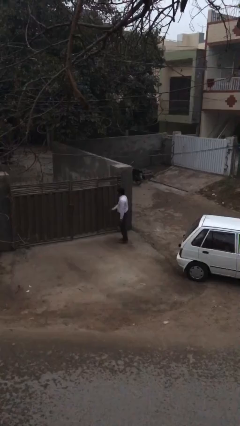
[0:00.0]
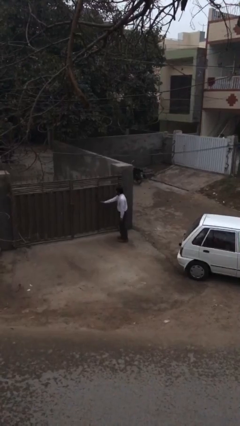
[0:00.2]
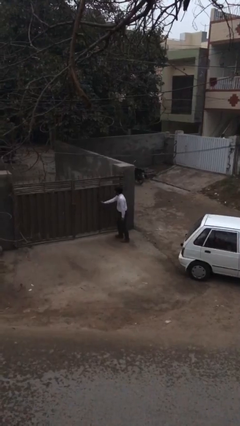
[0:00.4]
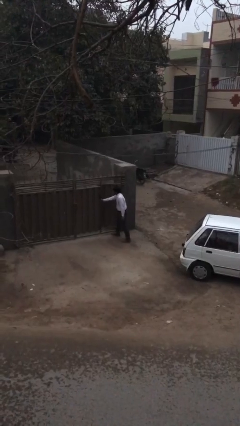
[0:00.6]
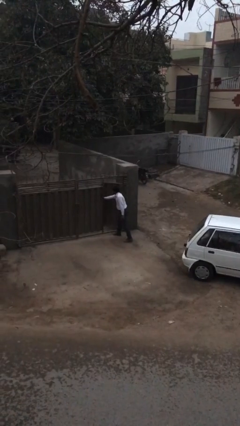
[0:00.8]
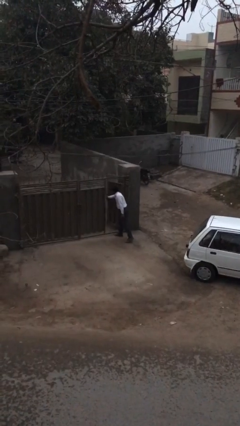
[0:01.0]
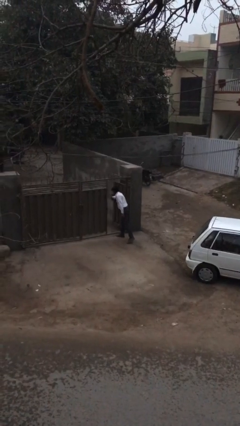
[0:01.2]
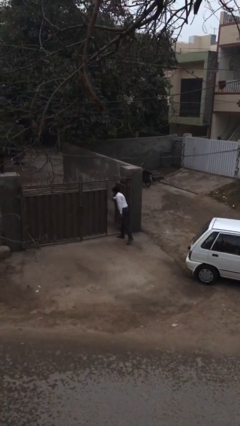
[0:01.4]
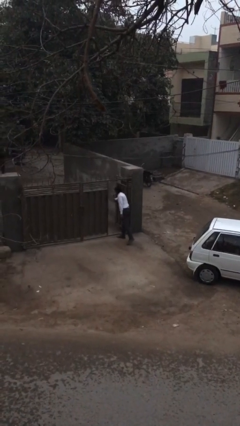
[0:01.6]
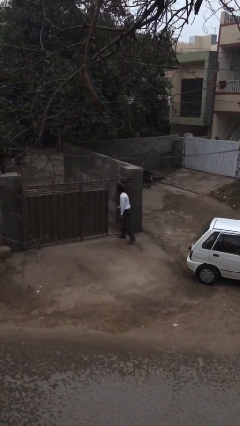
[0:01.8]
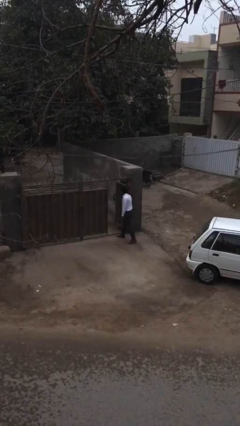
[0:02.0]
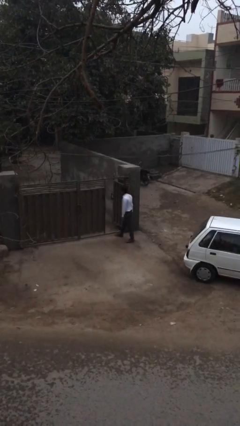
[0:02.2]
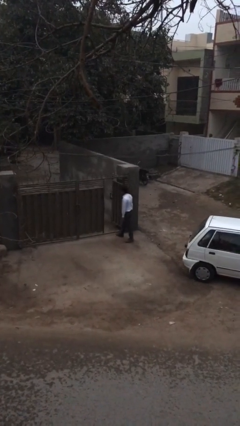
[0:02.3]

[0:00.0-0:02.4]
person opens facility door

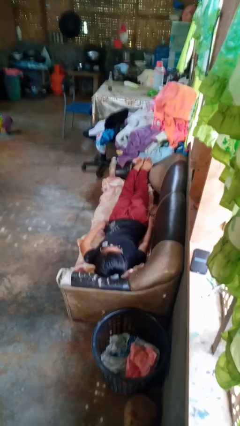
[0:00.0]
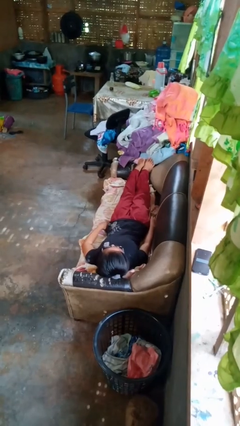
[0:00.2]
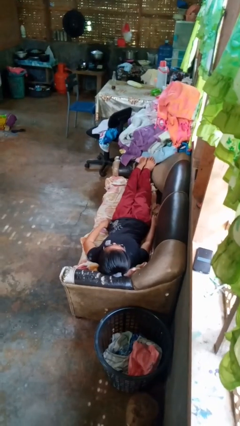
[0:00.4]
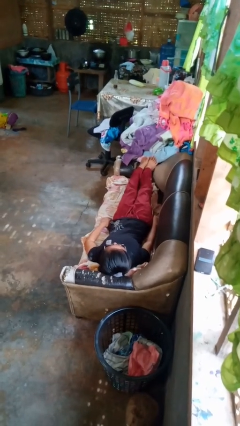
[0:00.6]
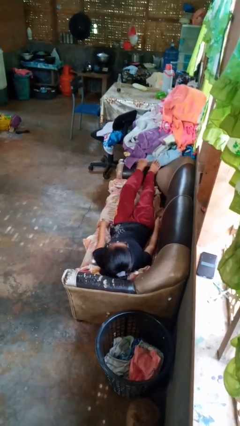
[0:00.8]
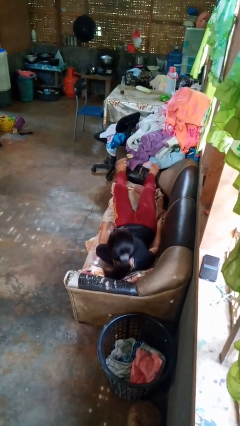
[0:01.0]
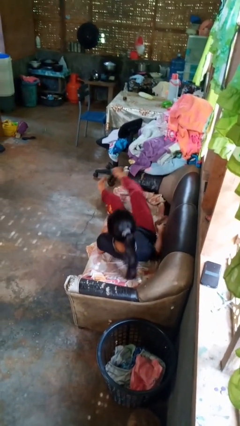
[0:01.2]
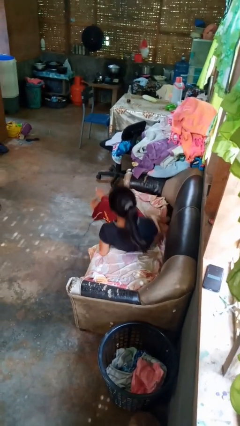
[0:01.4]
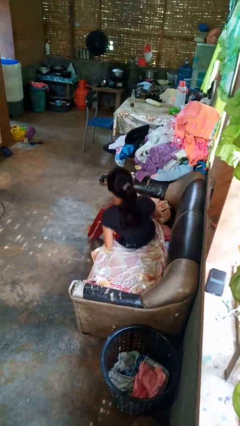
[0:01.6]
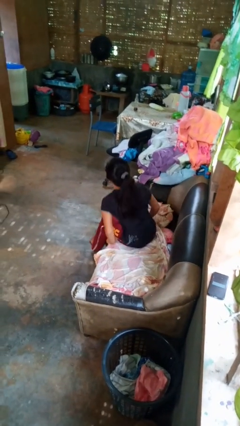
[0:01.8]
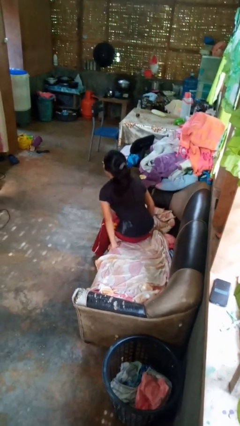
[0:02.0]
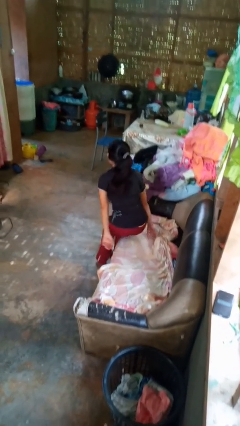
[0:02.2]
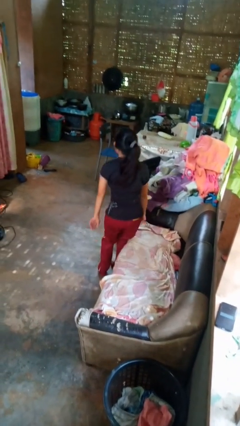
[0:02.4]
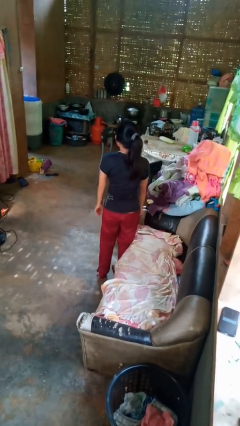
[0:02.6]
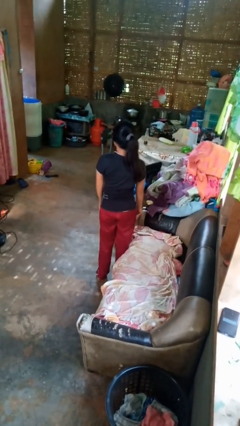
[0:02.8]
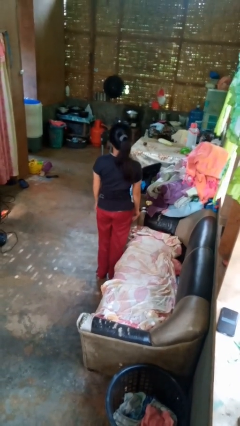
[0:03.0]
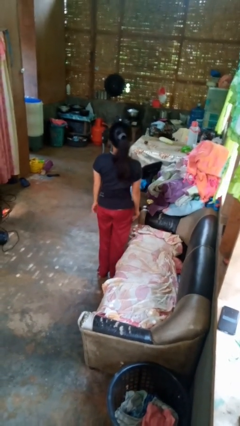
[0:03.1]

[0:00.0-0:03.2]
person stands up

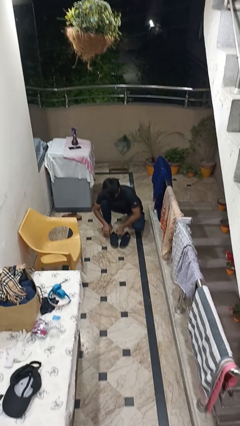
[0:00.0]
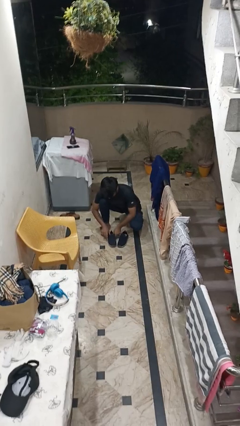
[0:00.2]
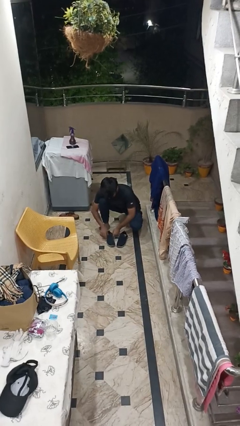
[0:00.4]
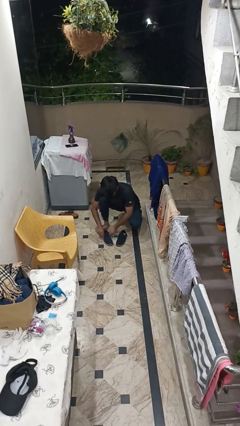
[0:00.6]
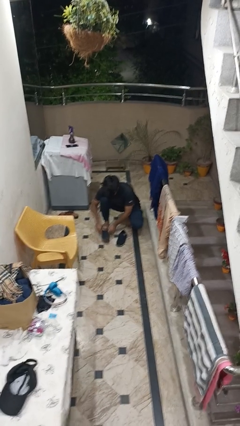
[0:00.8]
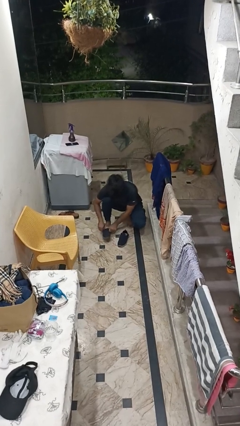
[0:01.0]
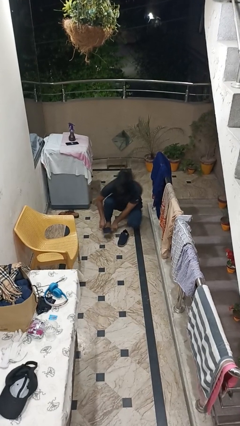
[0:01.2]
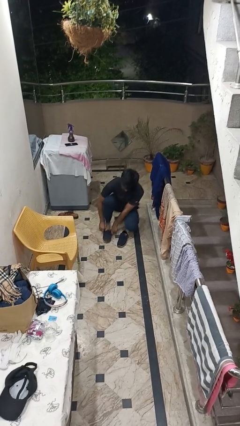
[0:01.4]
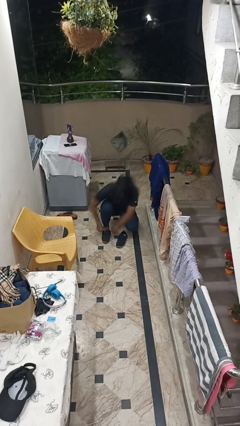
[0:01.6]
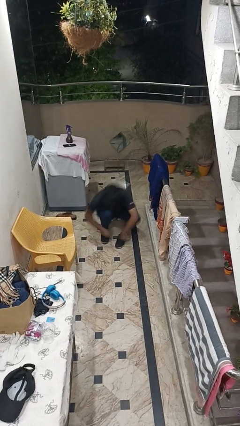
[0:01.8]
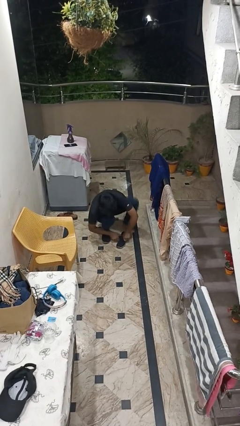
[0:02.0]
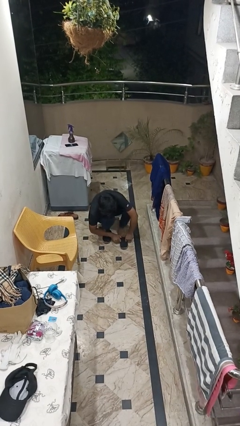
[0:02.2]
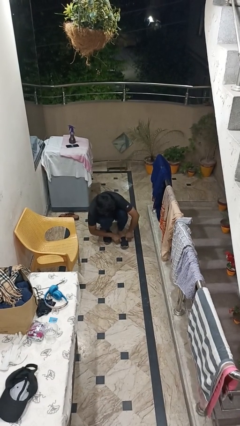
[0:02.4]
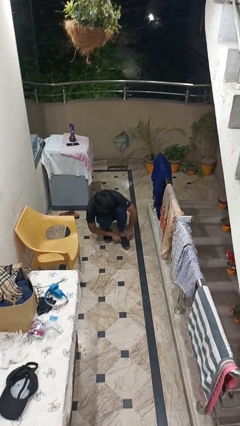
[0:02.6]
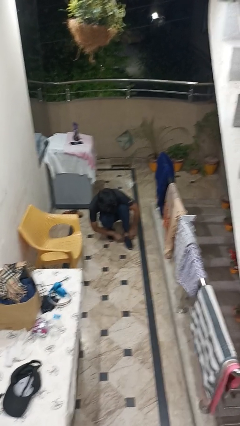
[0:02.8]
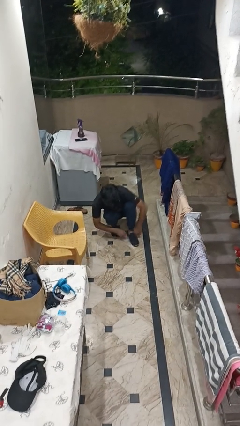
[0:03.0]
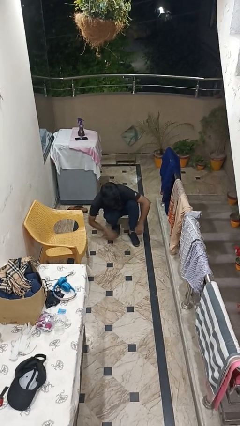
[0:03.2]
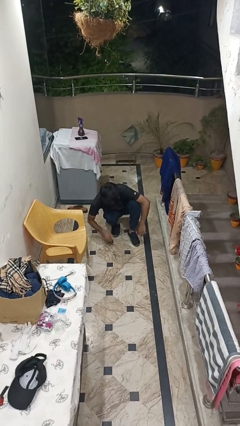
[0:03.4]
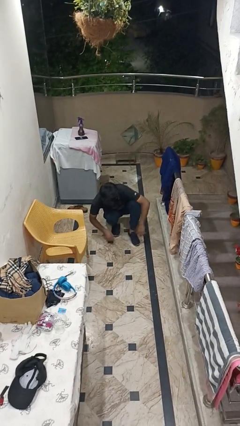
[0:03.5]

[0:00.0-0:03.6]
person puts on shoes

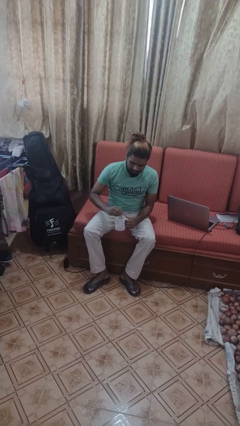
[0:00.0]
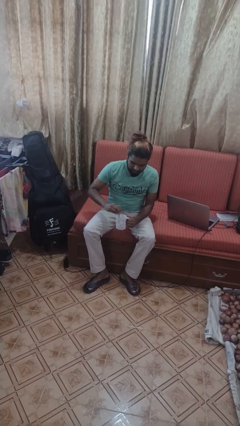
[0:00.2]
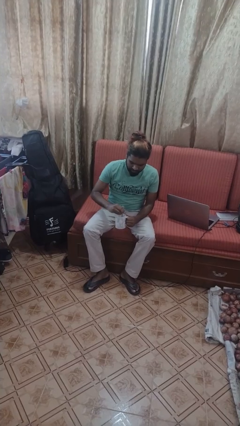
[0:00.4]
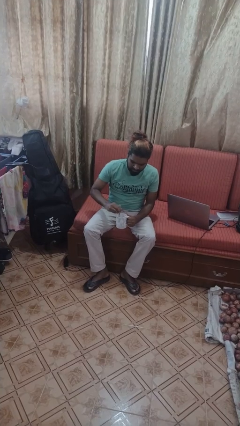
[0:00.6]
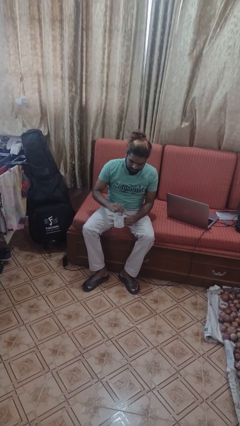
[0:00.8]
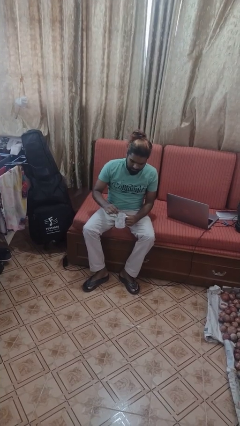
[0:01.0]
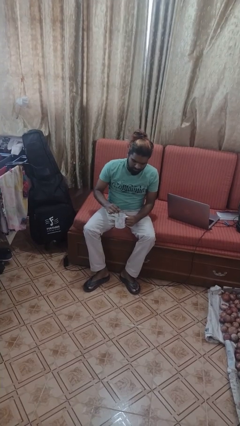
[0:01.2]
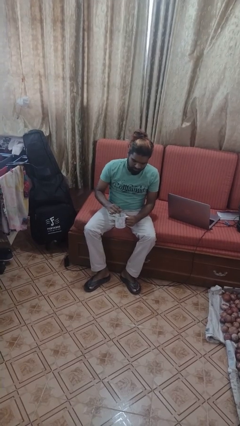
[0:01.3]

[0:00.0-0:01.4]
person stirs mug

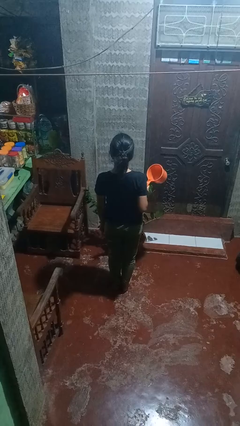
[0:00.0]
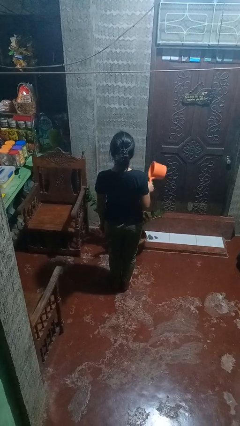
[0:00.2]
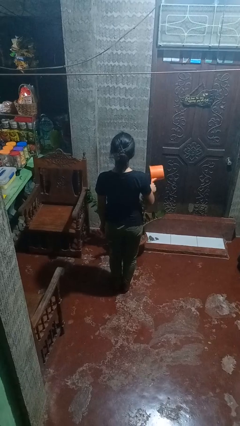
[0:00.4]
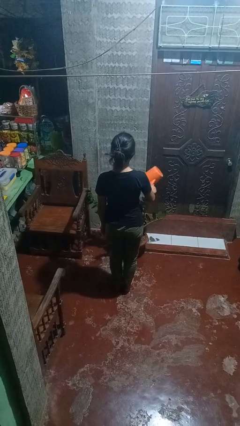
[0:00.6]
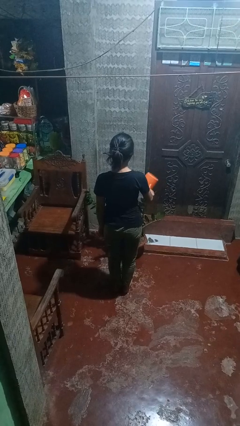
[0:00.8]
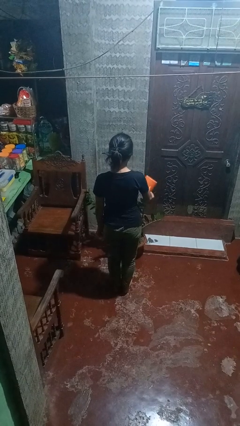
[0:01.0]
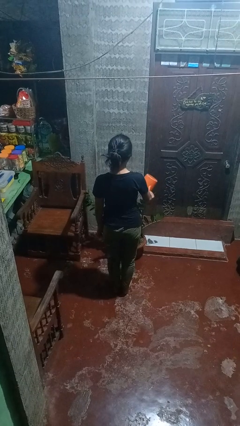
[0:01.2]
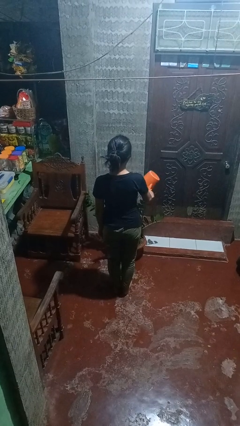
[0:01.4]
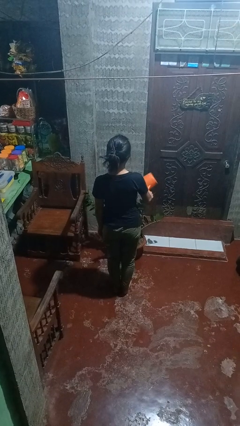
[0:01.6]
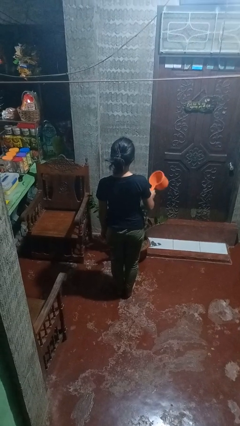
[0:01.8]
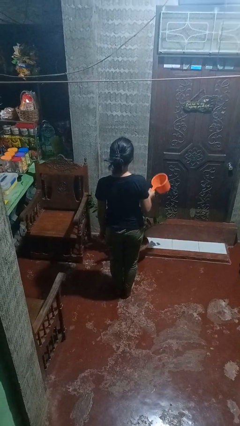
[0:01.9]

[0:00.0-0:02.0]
person waters houseplant

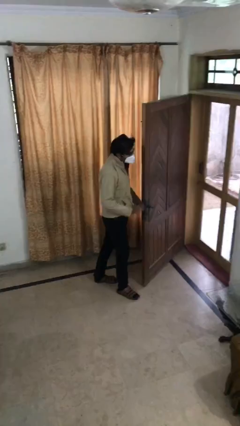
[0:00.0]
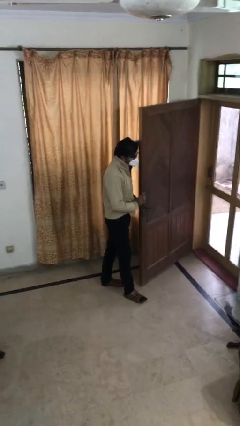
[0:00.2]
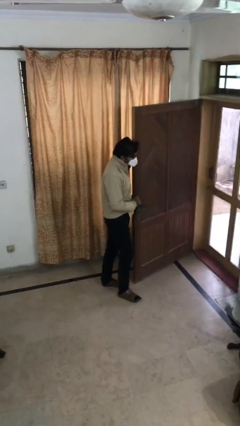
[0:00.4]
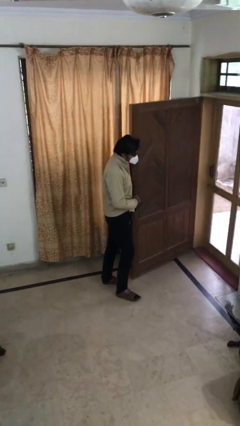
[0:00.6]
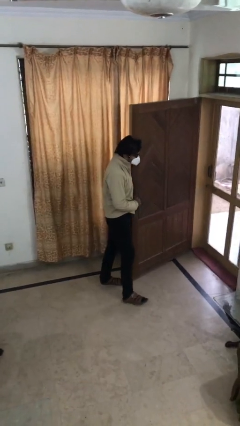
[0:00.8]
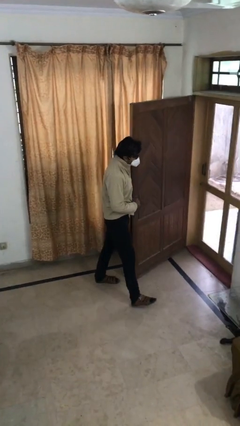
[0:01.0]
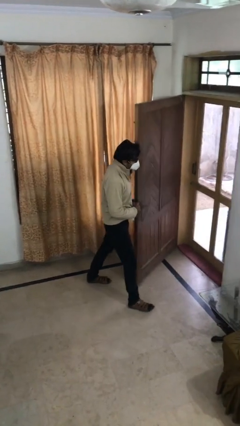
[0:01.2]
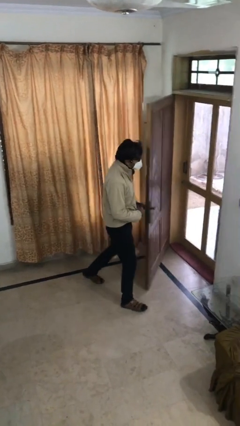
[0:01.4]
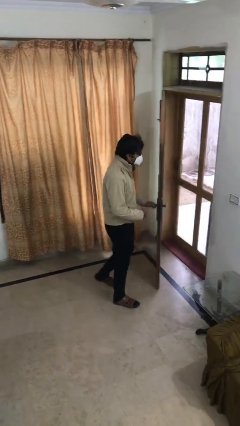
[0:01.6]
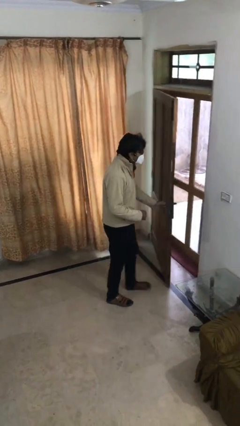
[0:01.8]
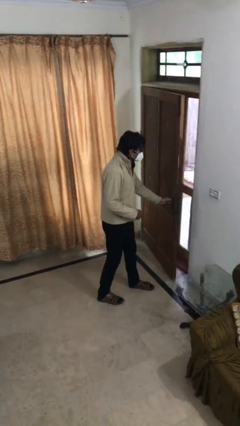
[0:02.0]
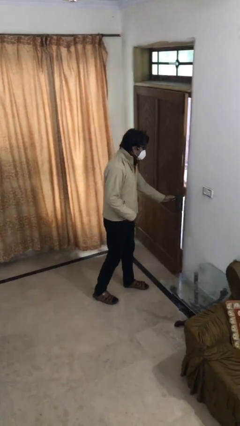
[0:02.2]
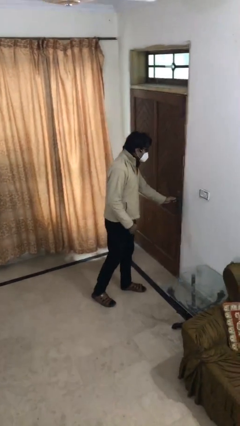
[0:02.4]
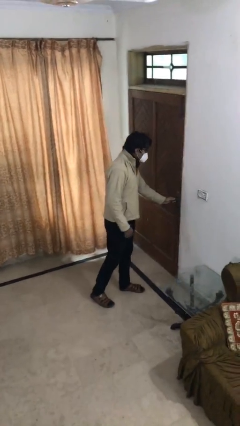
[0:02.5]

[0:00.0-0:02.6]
person closes facility door

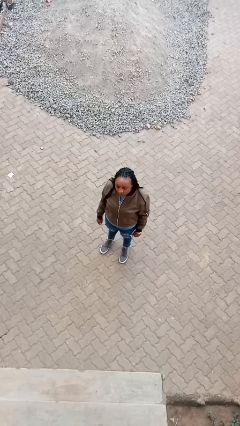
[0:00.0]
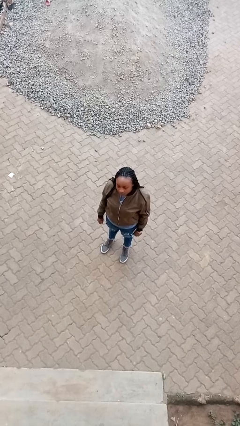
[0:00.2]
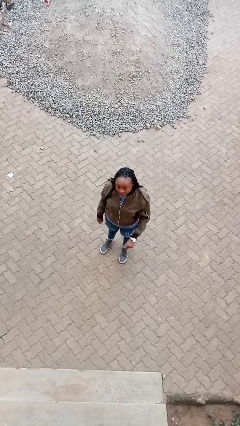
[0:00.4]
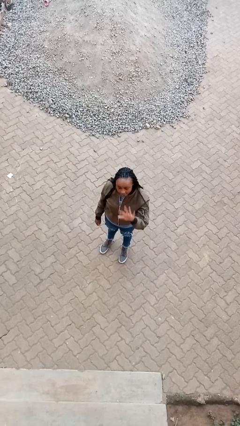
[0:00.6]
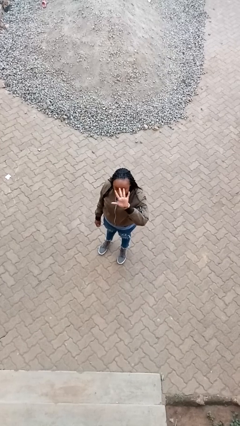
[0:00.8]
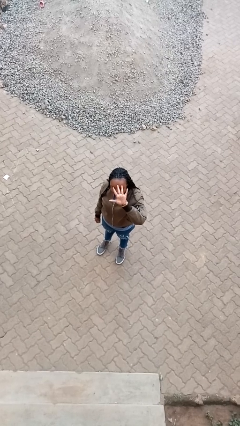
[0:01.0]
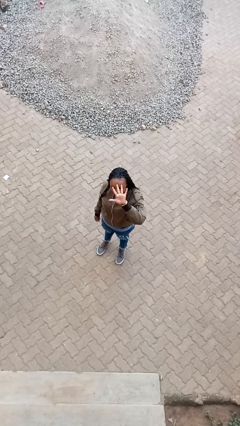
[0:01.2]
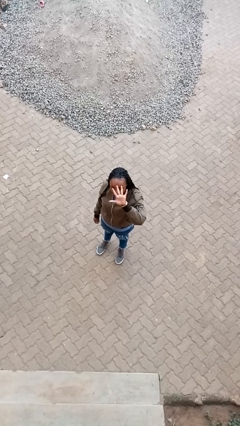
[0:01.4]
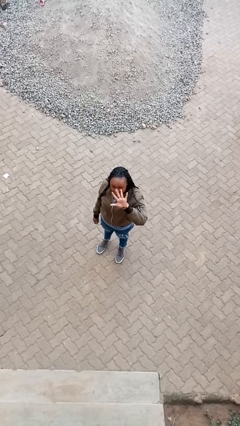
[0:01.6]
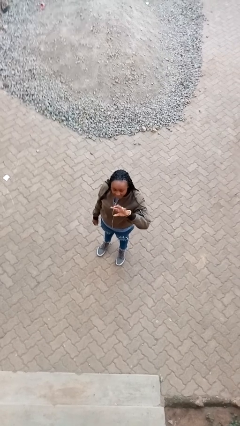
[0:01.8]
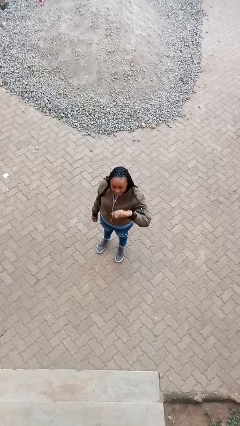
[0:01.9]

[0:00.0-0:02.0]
person gestures number five
